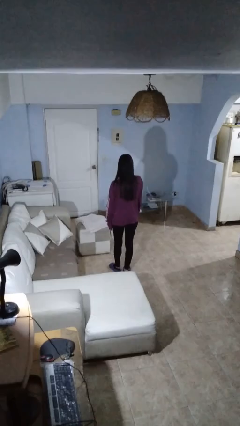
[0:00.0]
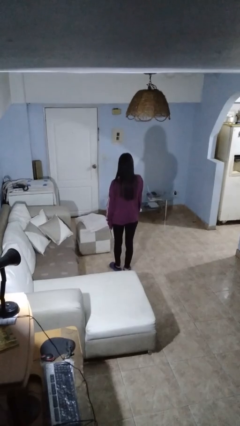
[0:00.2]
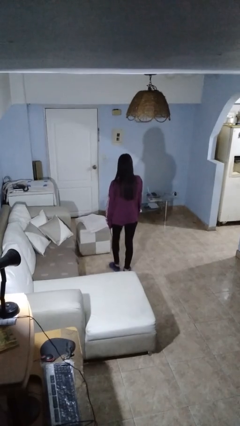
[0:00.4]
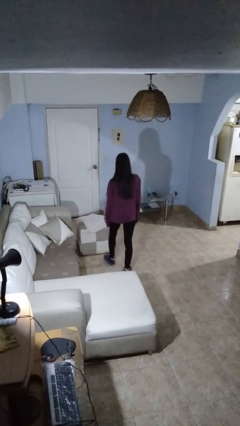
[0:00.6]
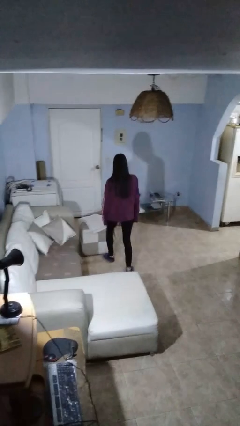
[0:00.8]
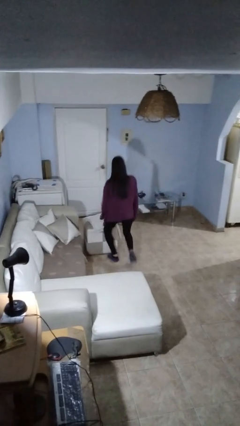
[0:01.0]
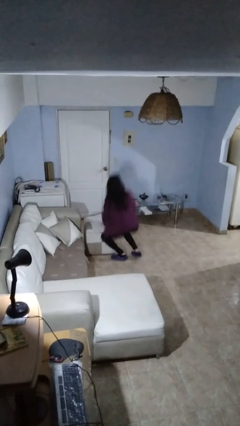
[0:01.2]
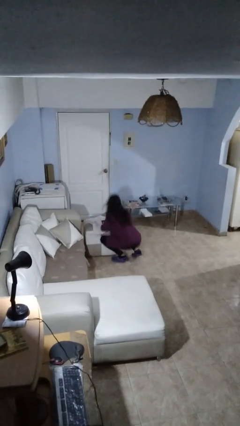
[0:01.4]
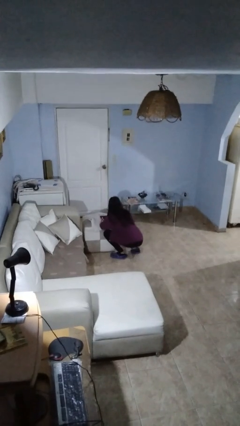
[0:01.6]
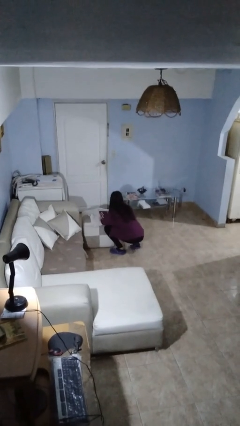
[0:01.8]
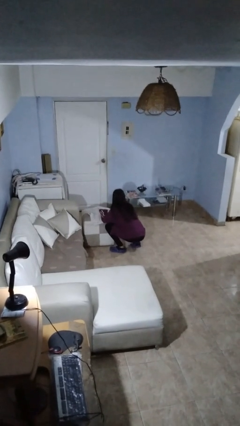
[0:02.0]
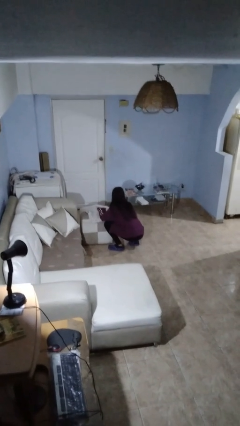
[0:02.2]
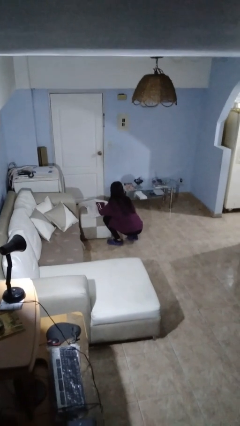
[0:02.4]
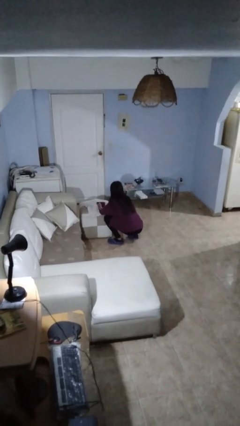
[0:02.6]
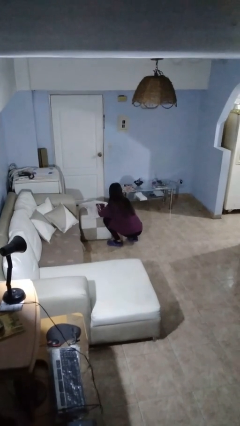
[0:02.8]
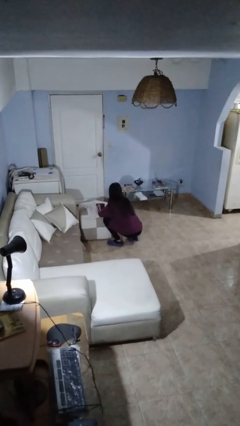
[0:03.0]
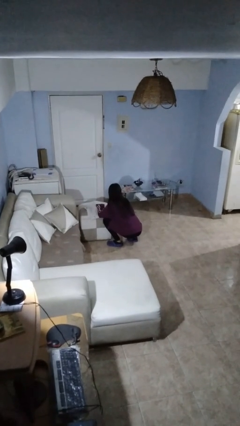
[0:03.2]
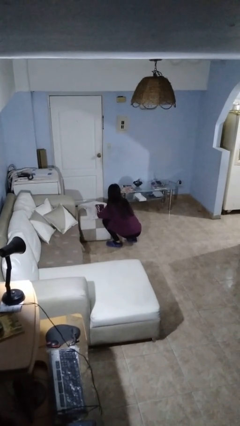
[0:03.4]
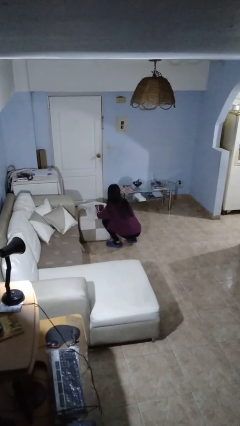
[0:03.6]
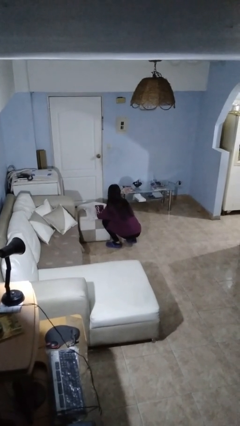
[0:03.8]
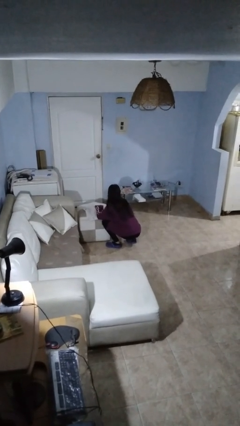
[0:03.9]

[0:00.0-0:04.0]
person trips on object on floor

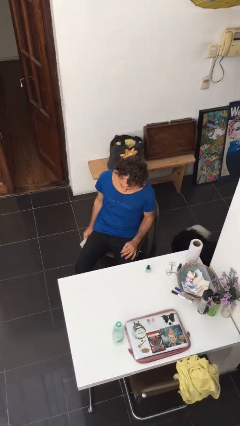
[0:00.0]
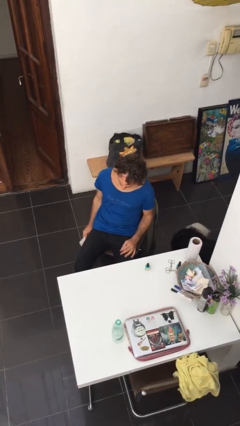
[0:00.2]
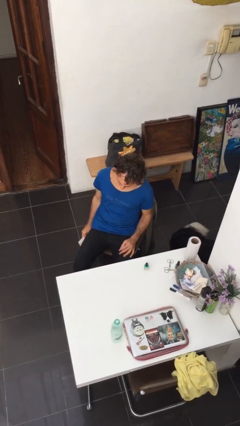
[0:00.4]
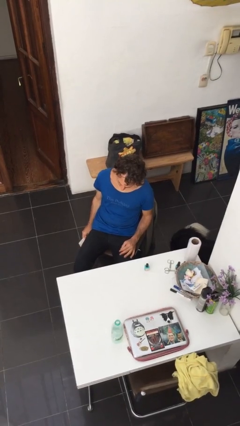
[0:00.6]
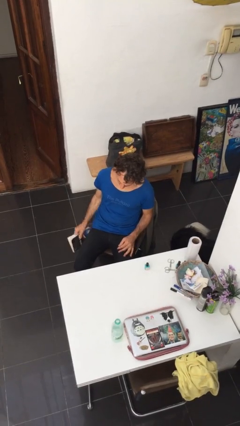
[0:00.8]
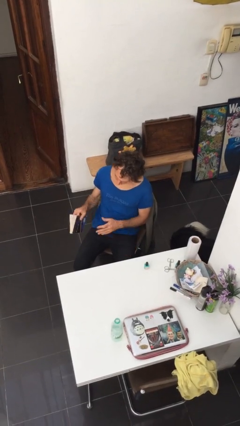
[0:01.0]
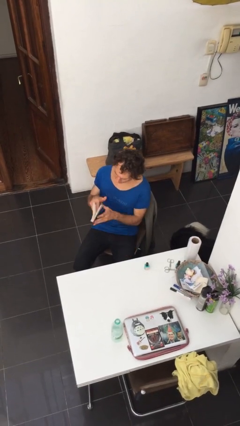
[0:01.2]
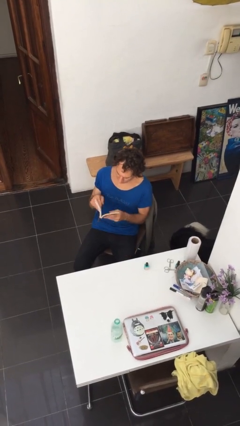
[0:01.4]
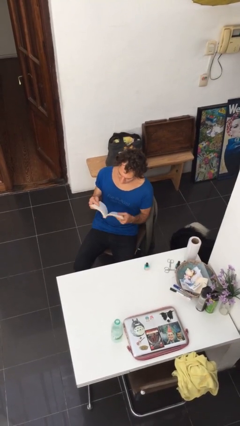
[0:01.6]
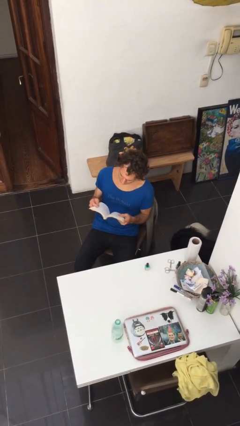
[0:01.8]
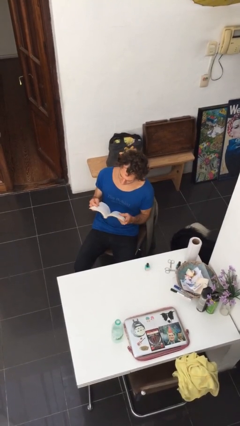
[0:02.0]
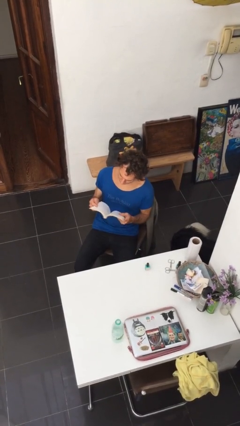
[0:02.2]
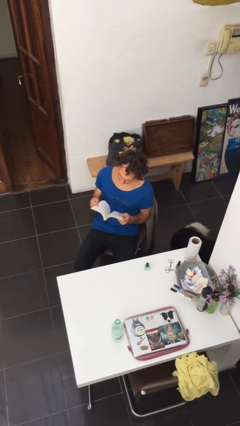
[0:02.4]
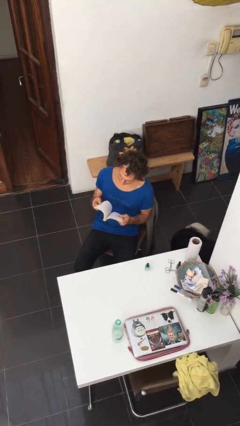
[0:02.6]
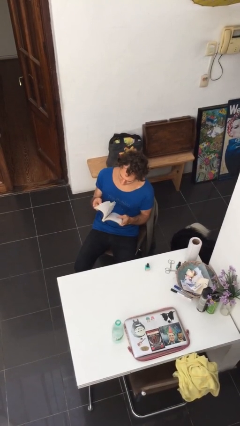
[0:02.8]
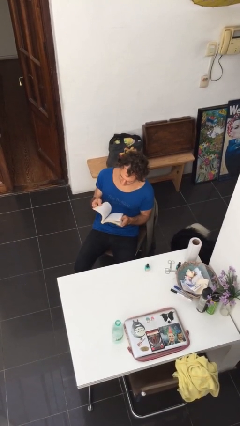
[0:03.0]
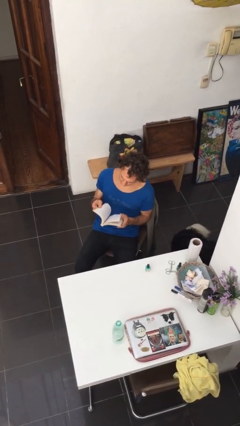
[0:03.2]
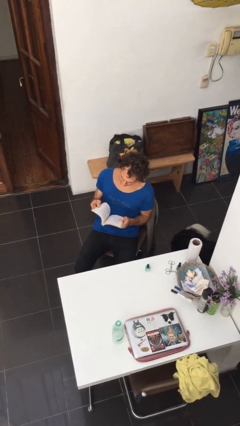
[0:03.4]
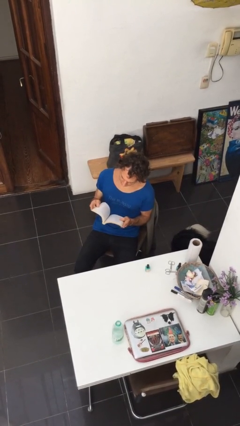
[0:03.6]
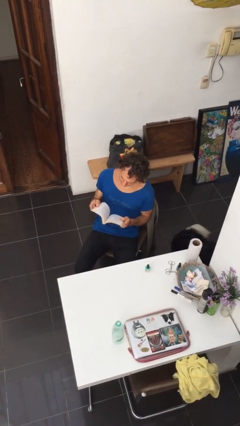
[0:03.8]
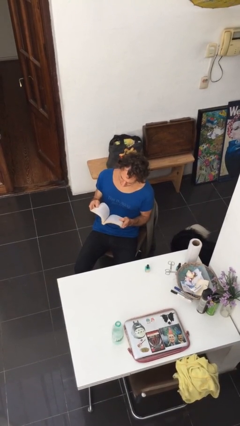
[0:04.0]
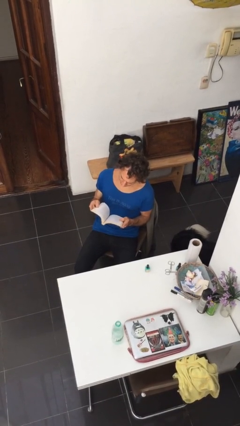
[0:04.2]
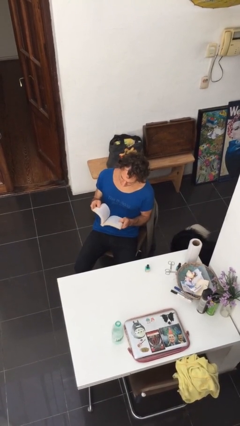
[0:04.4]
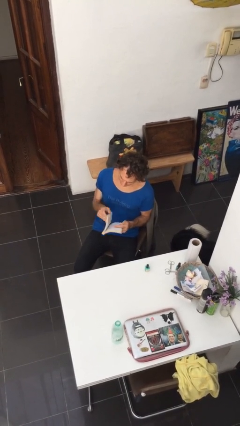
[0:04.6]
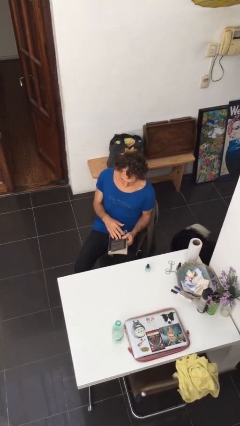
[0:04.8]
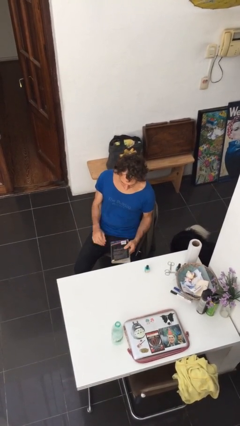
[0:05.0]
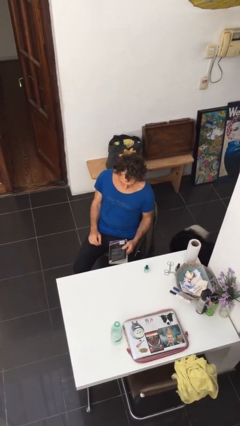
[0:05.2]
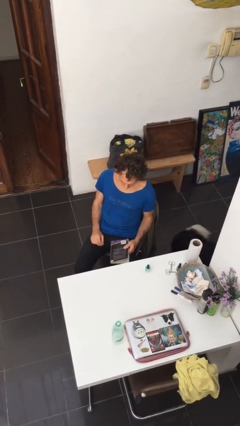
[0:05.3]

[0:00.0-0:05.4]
person reads document

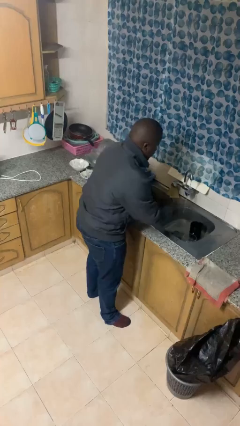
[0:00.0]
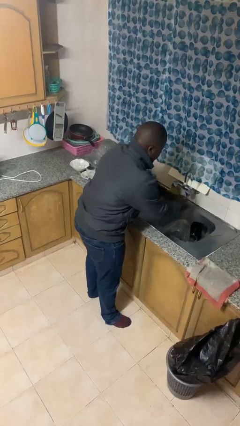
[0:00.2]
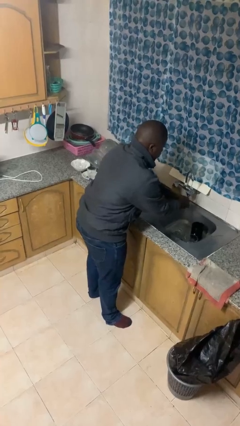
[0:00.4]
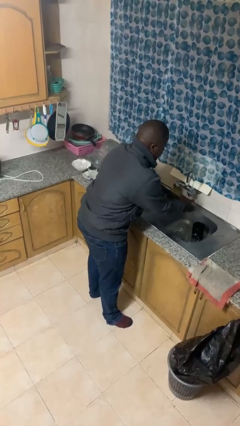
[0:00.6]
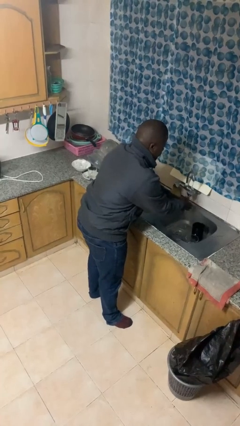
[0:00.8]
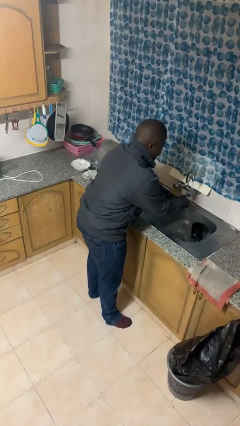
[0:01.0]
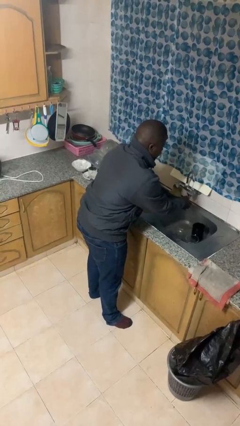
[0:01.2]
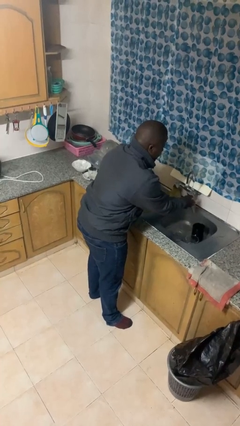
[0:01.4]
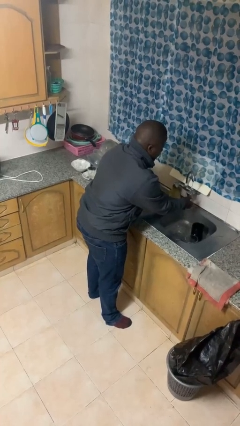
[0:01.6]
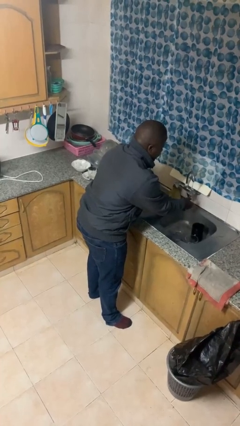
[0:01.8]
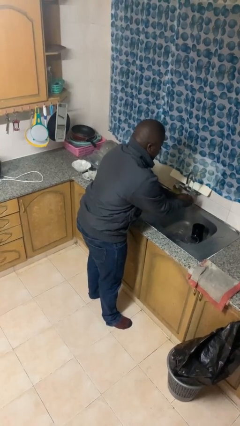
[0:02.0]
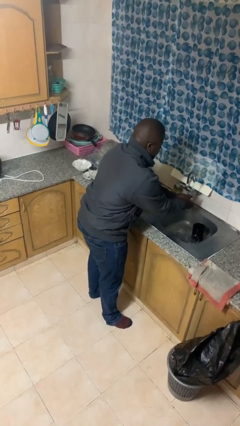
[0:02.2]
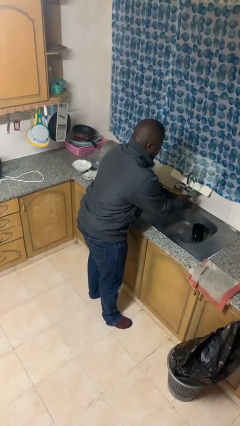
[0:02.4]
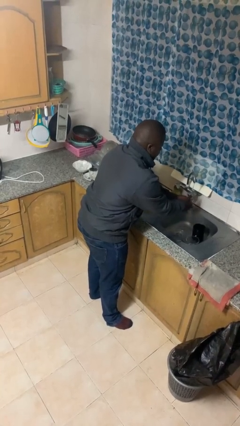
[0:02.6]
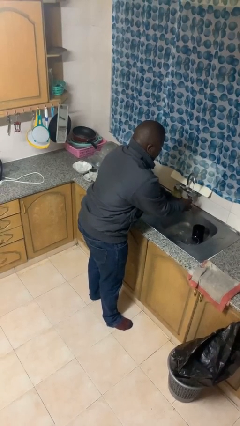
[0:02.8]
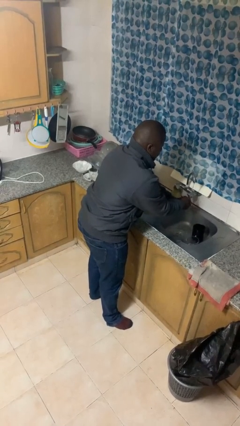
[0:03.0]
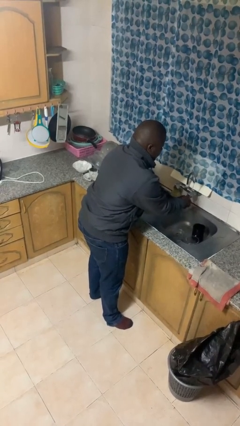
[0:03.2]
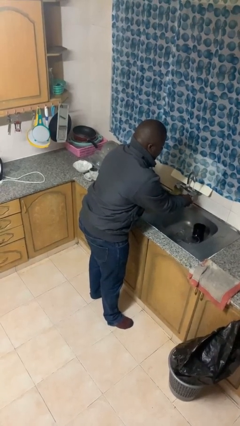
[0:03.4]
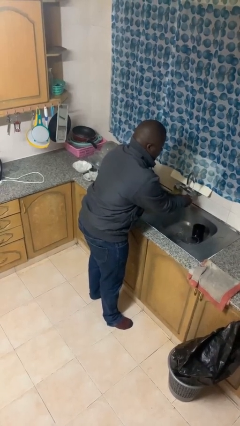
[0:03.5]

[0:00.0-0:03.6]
person washes hands

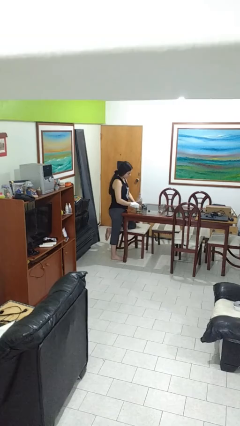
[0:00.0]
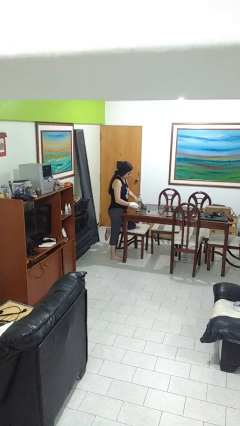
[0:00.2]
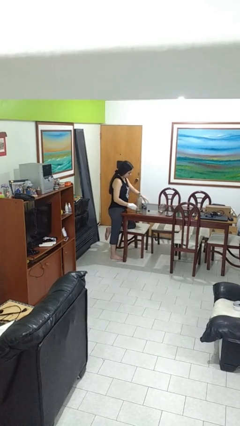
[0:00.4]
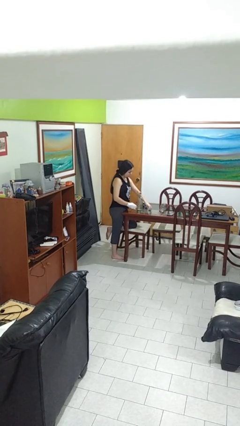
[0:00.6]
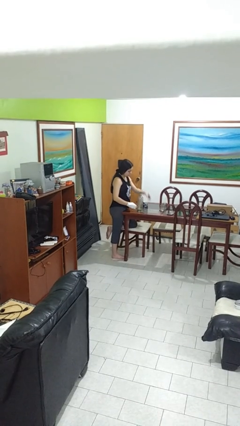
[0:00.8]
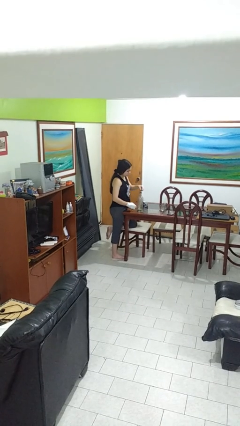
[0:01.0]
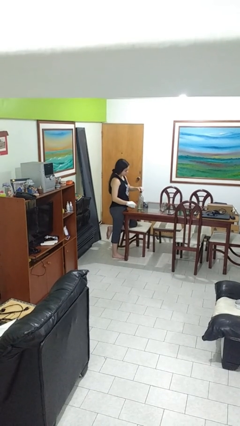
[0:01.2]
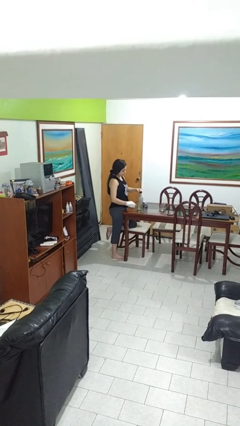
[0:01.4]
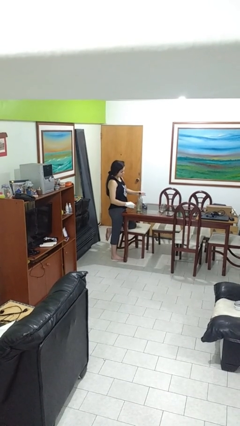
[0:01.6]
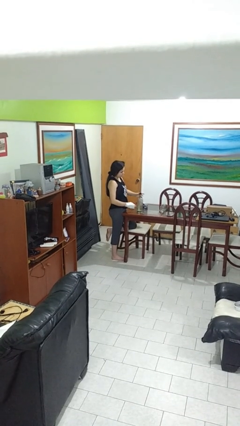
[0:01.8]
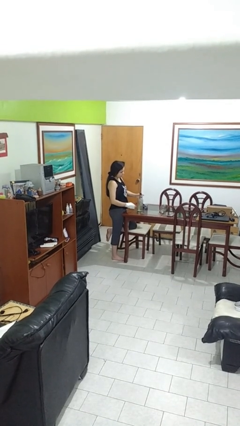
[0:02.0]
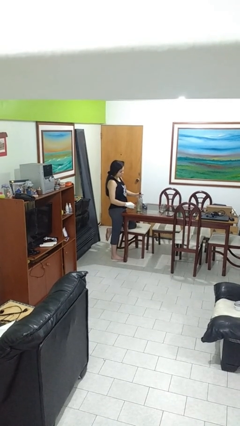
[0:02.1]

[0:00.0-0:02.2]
person screws lid to bottle

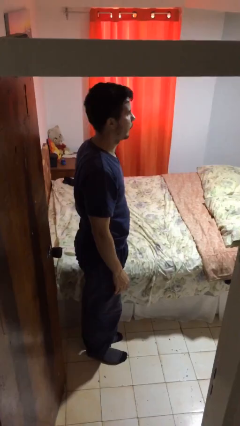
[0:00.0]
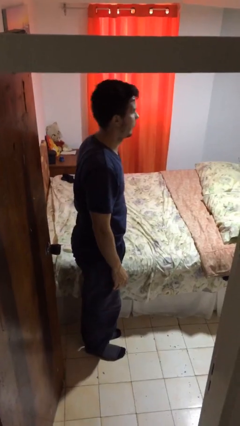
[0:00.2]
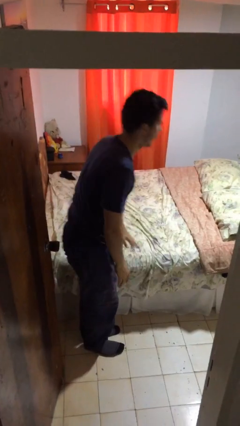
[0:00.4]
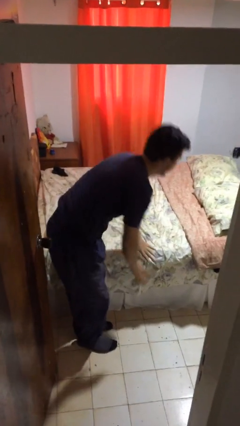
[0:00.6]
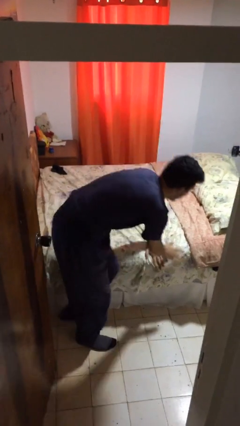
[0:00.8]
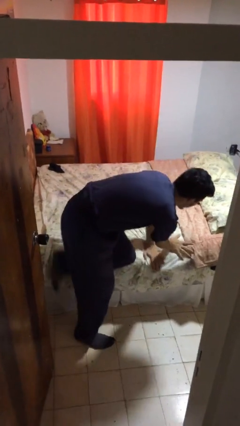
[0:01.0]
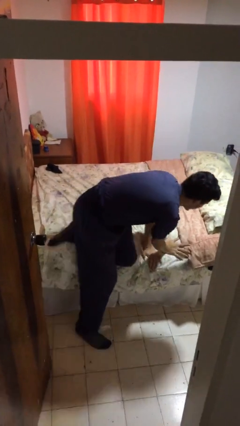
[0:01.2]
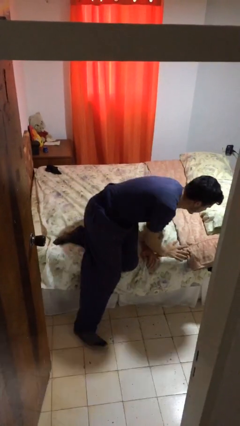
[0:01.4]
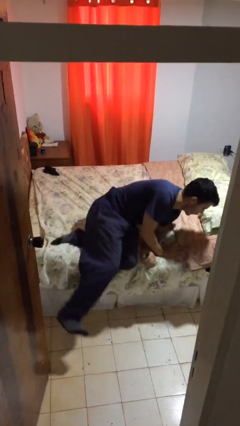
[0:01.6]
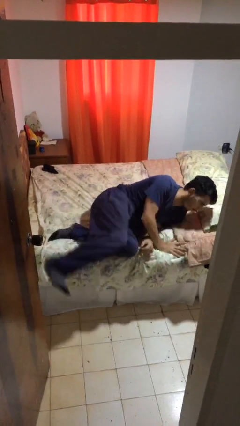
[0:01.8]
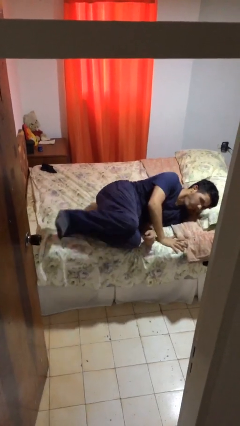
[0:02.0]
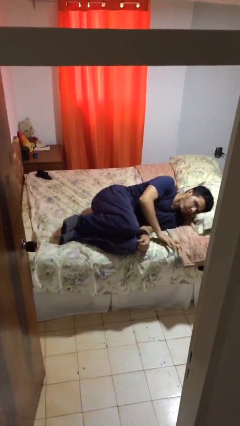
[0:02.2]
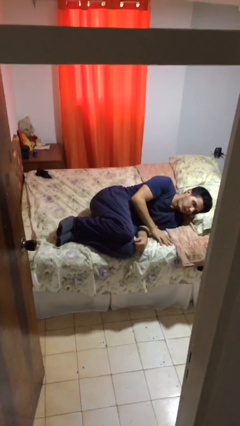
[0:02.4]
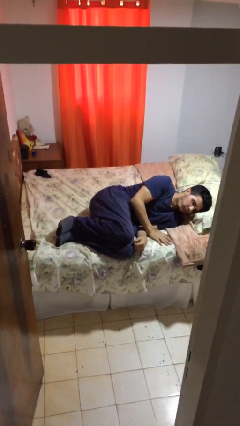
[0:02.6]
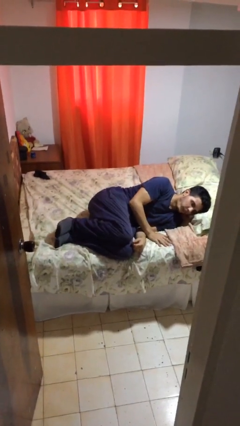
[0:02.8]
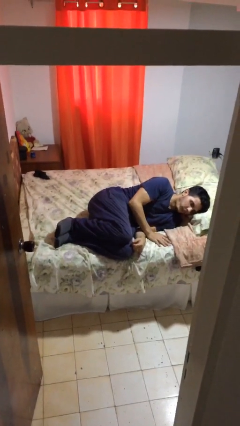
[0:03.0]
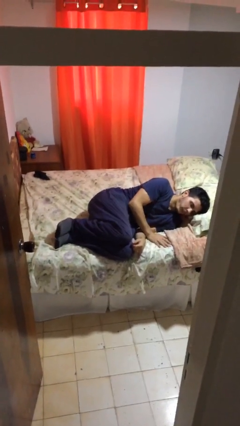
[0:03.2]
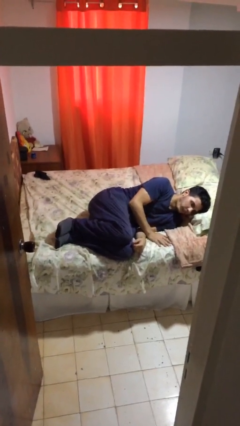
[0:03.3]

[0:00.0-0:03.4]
person lies down on bed
